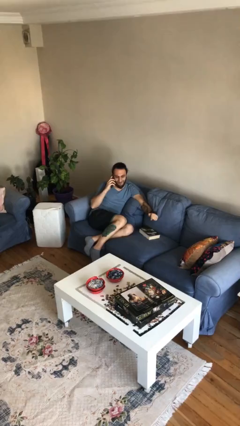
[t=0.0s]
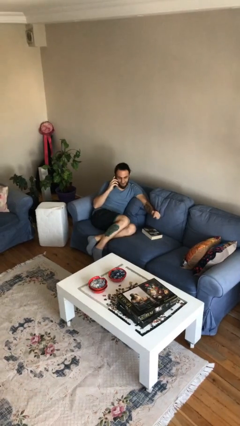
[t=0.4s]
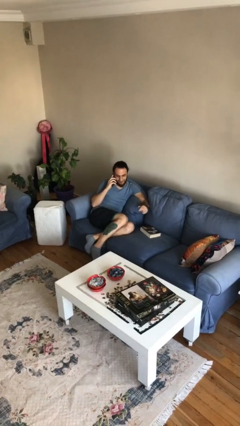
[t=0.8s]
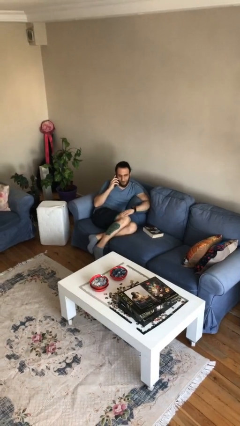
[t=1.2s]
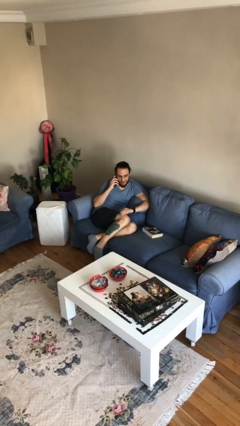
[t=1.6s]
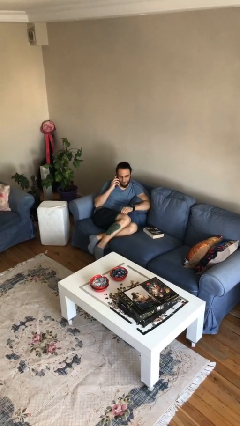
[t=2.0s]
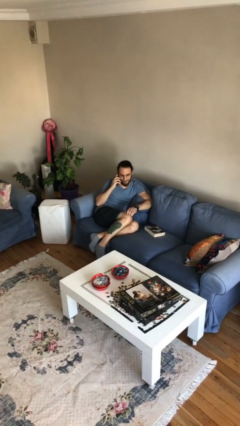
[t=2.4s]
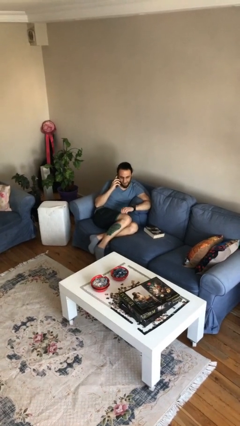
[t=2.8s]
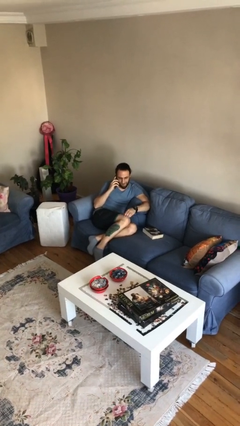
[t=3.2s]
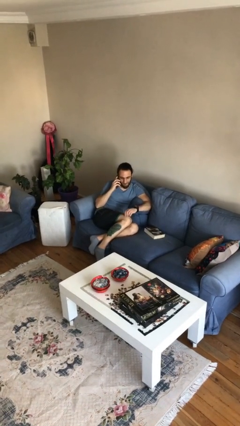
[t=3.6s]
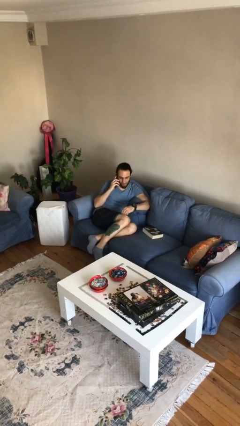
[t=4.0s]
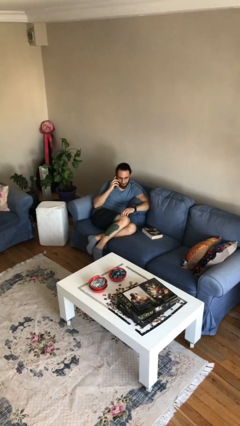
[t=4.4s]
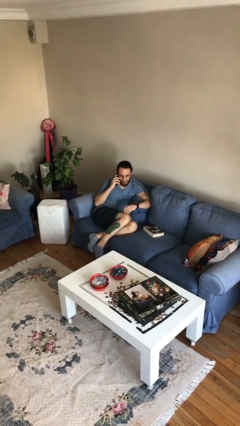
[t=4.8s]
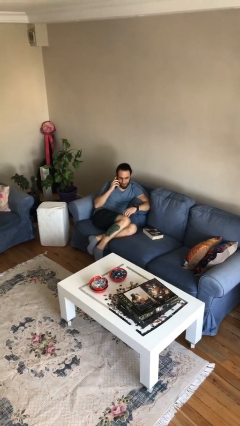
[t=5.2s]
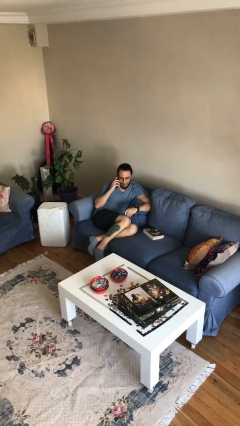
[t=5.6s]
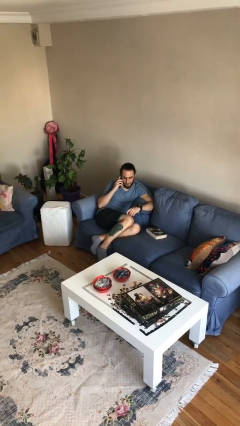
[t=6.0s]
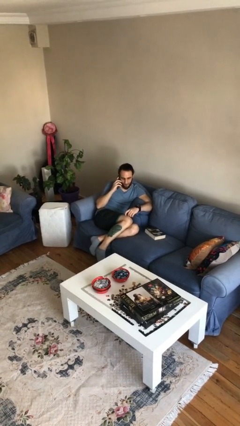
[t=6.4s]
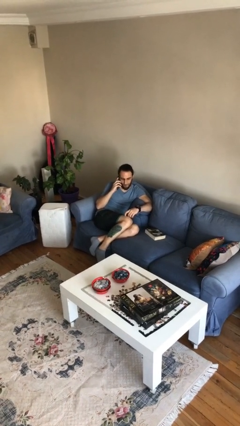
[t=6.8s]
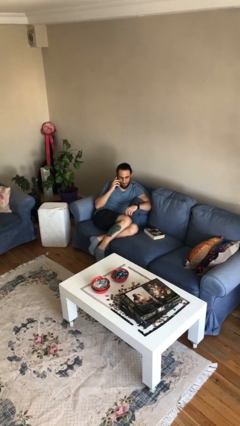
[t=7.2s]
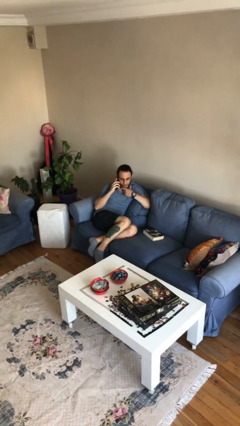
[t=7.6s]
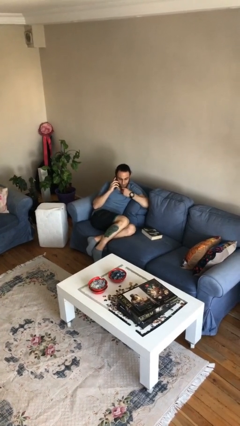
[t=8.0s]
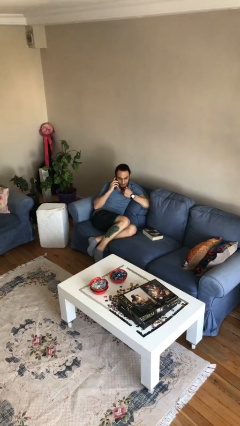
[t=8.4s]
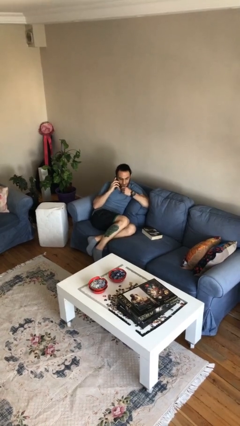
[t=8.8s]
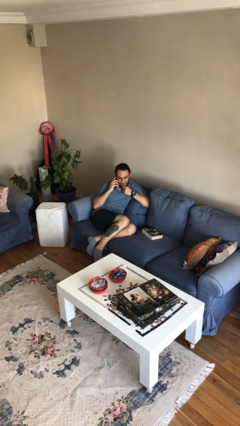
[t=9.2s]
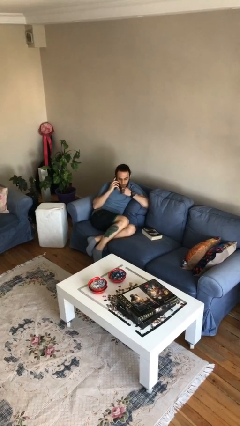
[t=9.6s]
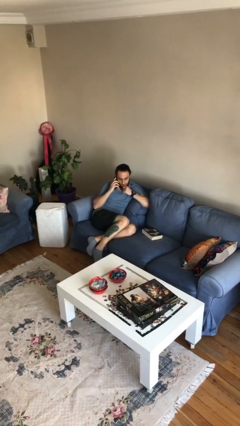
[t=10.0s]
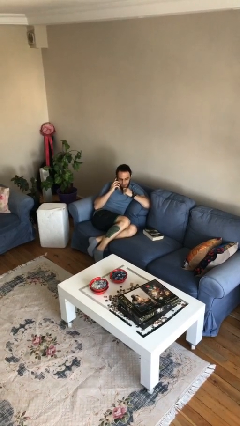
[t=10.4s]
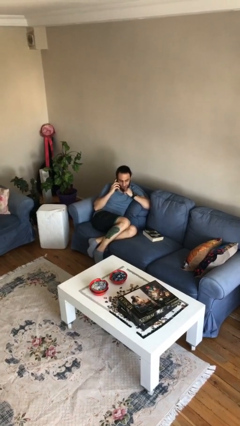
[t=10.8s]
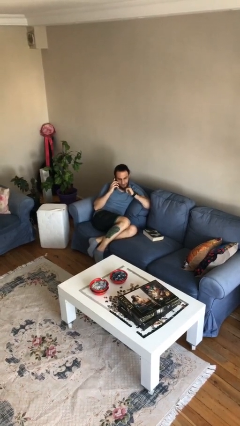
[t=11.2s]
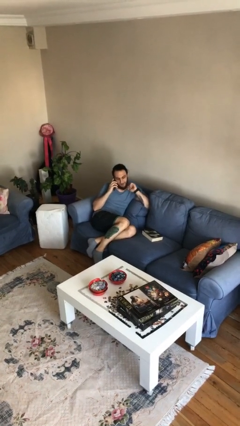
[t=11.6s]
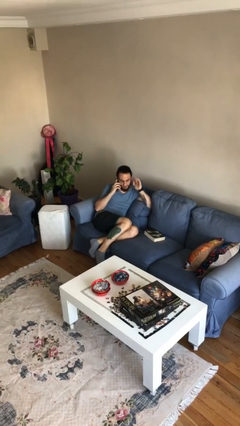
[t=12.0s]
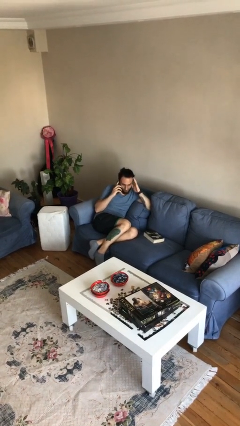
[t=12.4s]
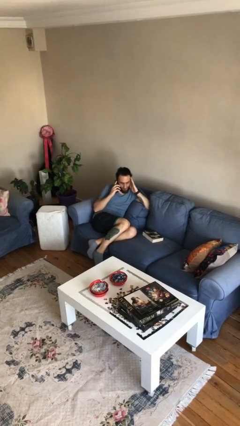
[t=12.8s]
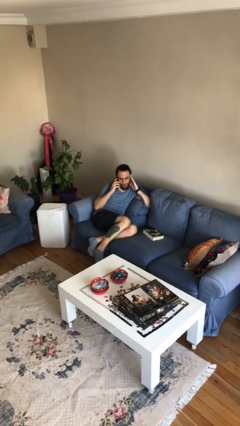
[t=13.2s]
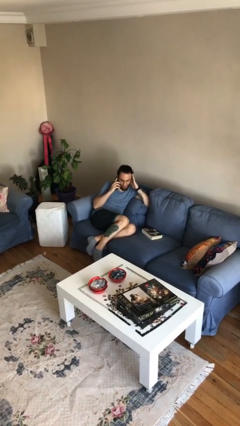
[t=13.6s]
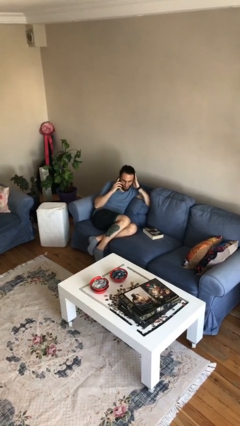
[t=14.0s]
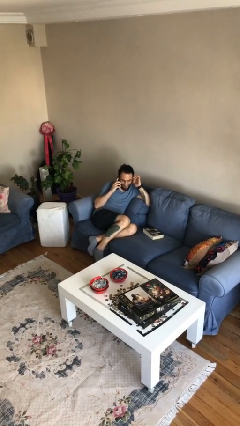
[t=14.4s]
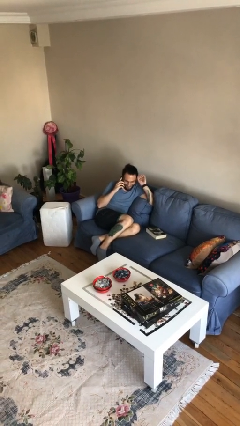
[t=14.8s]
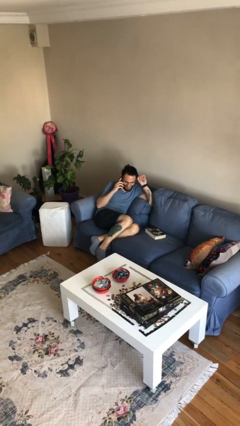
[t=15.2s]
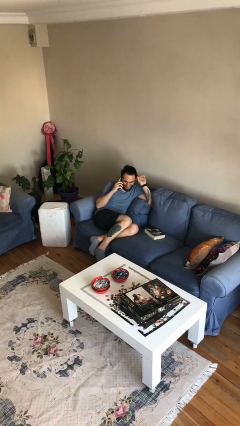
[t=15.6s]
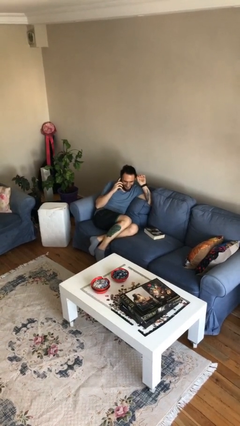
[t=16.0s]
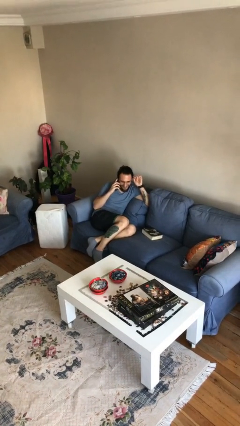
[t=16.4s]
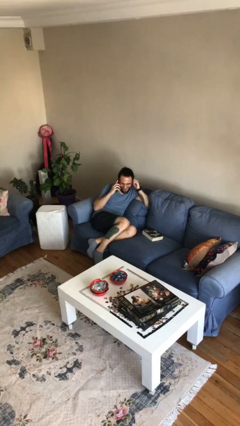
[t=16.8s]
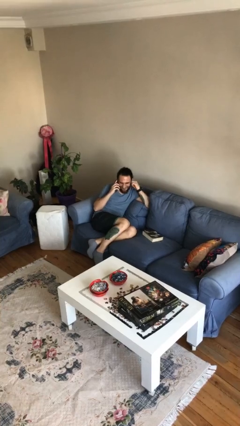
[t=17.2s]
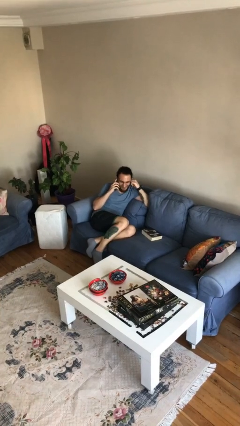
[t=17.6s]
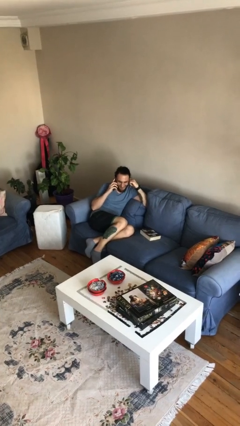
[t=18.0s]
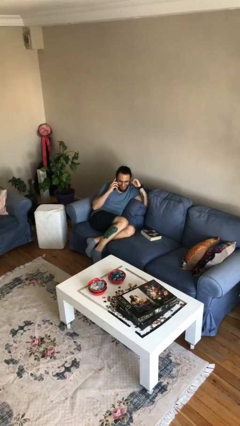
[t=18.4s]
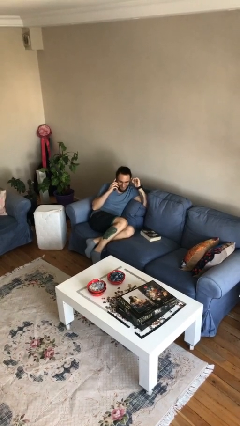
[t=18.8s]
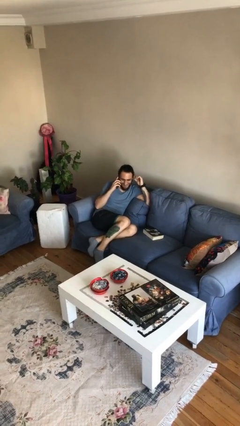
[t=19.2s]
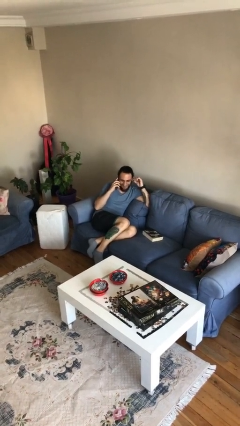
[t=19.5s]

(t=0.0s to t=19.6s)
person talks on phone

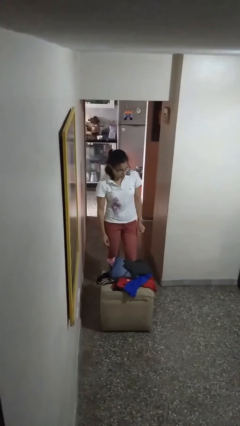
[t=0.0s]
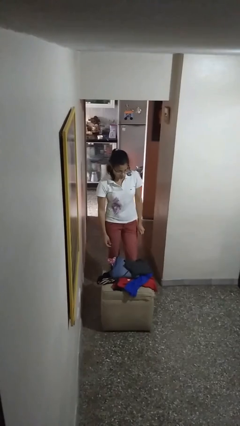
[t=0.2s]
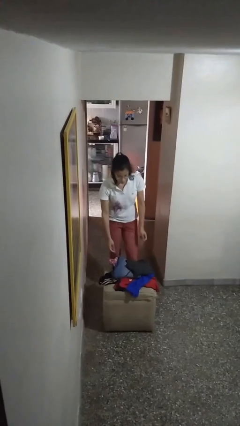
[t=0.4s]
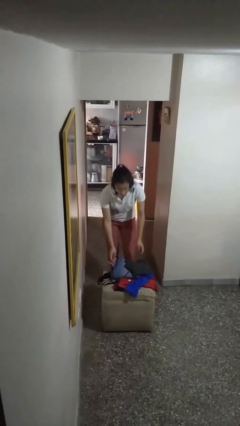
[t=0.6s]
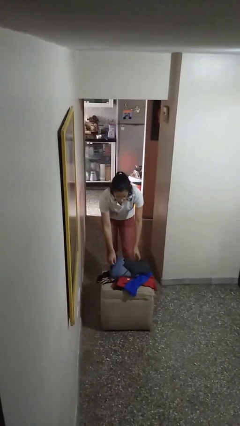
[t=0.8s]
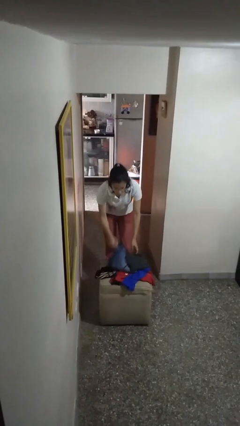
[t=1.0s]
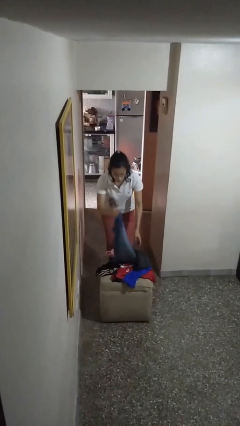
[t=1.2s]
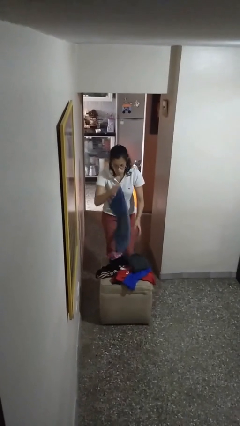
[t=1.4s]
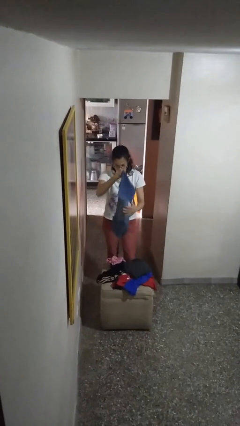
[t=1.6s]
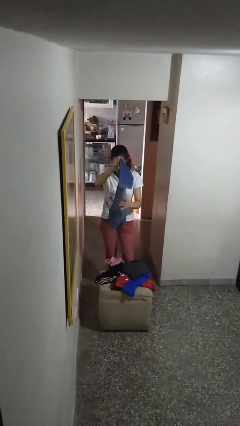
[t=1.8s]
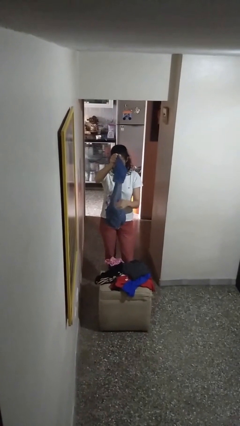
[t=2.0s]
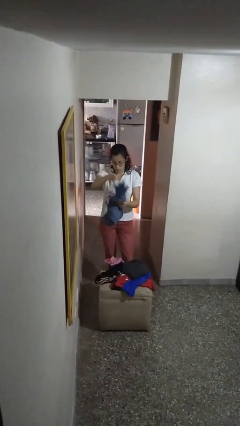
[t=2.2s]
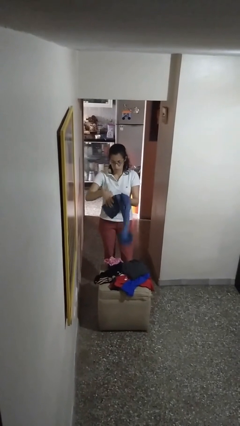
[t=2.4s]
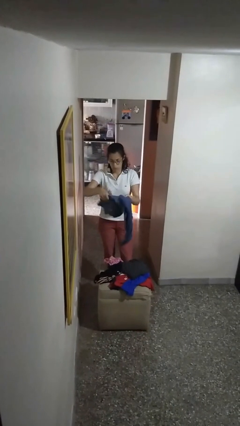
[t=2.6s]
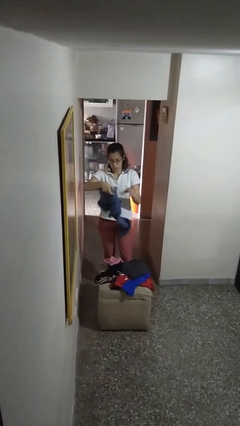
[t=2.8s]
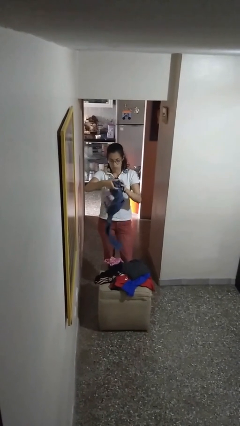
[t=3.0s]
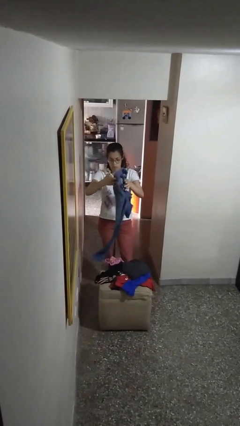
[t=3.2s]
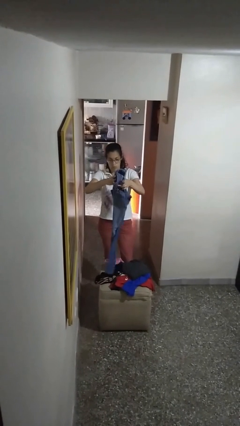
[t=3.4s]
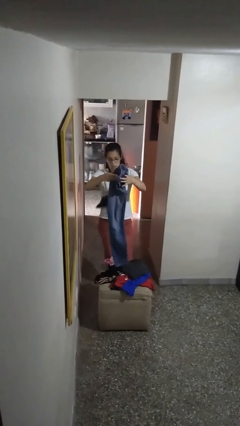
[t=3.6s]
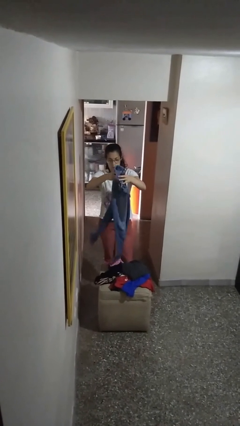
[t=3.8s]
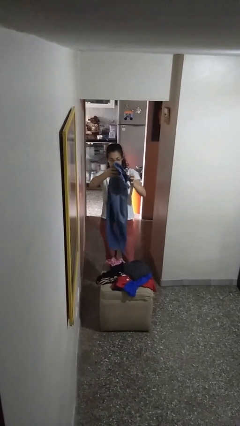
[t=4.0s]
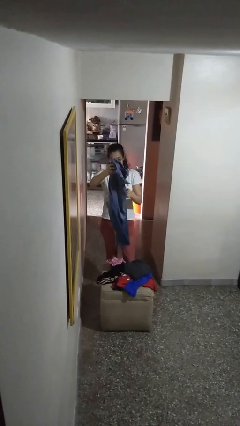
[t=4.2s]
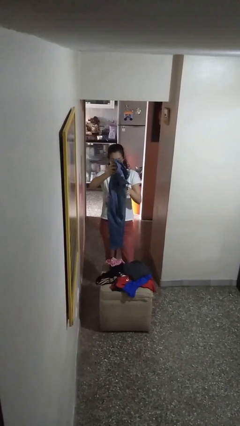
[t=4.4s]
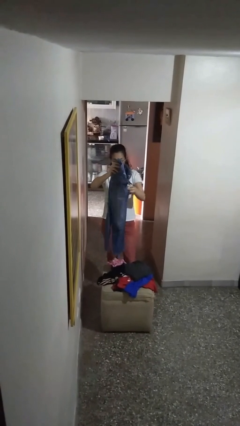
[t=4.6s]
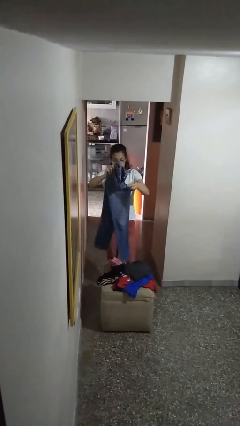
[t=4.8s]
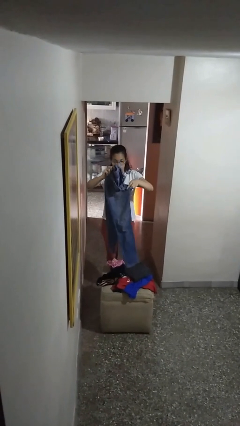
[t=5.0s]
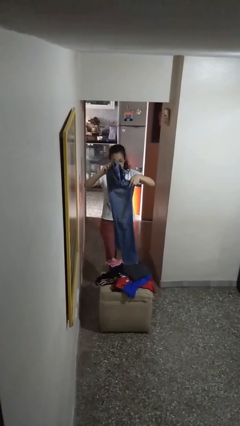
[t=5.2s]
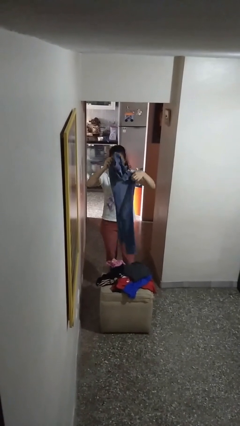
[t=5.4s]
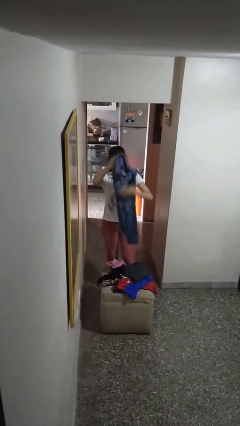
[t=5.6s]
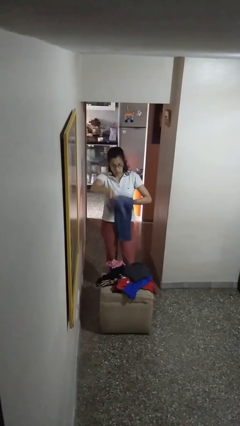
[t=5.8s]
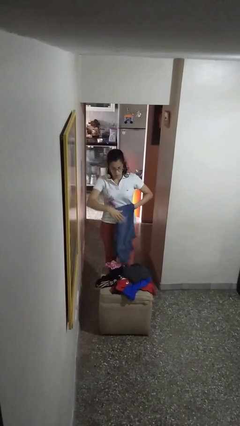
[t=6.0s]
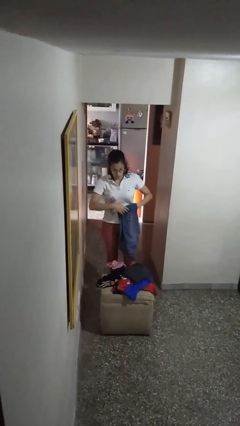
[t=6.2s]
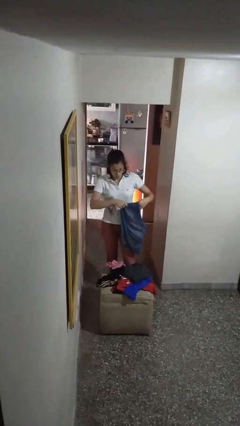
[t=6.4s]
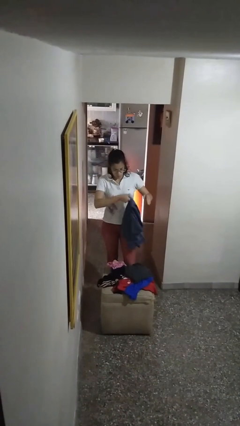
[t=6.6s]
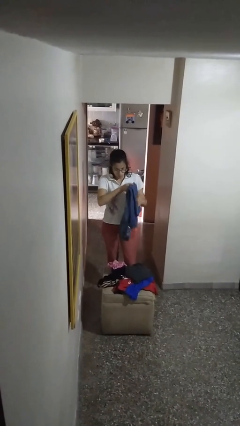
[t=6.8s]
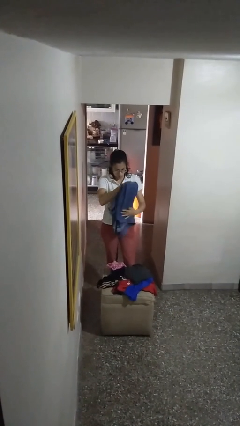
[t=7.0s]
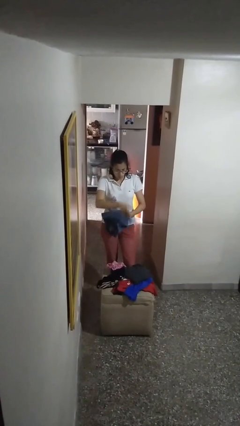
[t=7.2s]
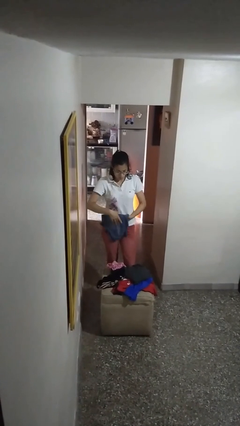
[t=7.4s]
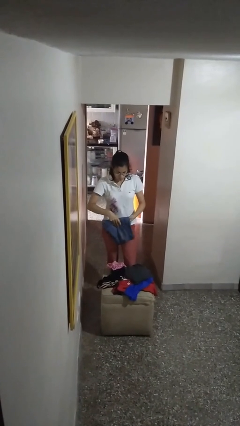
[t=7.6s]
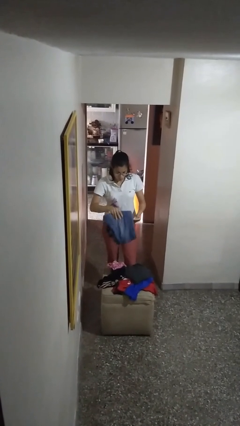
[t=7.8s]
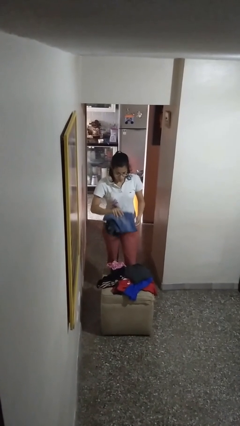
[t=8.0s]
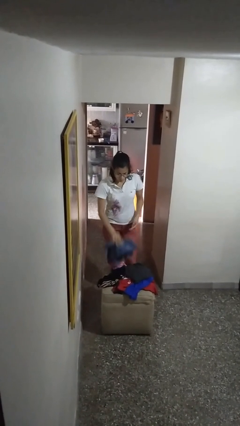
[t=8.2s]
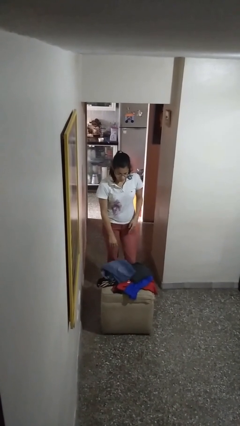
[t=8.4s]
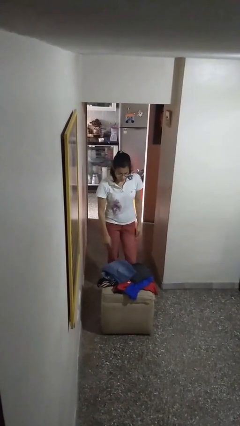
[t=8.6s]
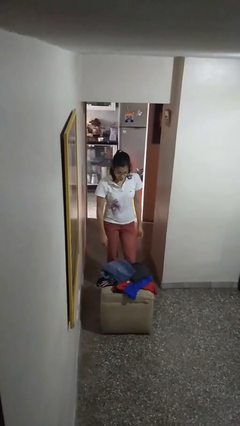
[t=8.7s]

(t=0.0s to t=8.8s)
person folds pants
